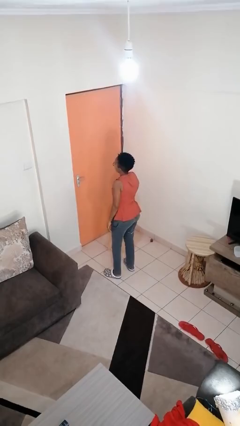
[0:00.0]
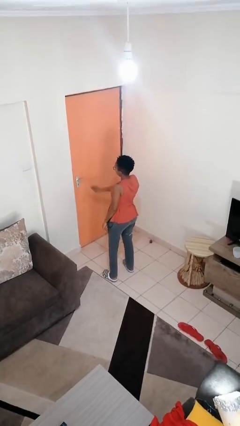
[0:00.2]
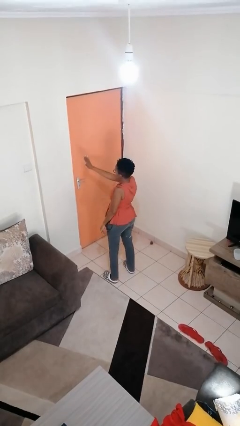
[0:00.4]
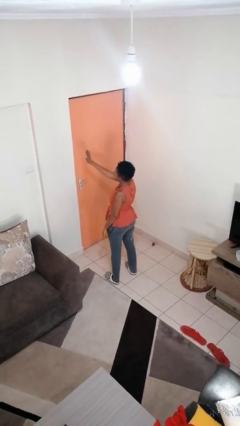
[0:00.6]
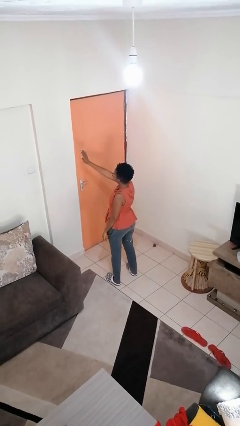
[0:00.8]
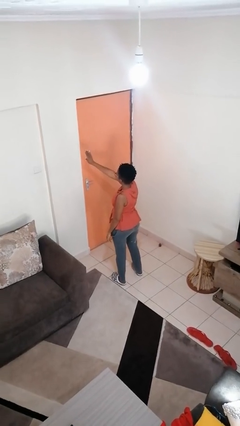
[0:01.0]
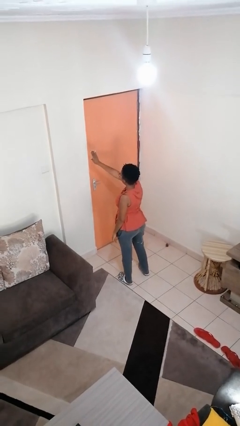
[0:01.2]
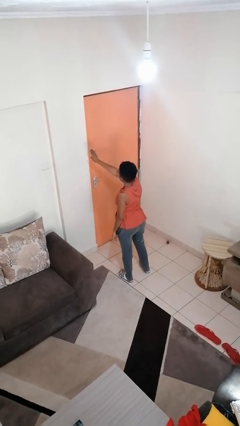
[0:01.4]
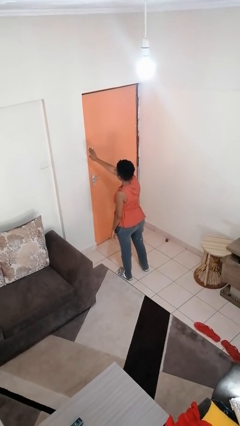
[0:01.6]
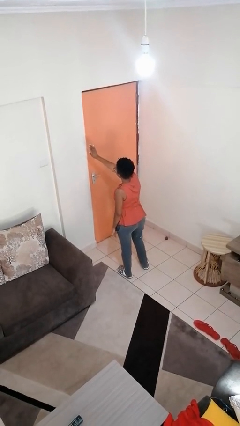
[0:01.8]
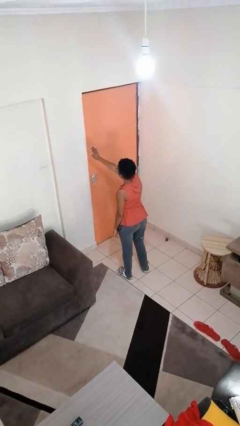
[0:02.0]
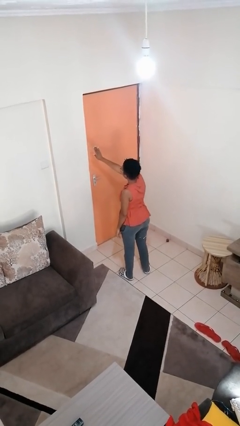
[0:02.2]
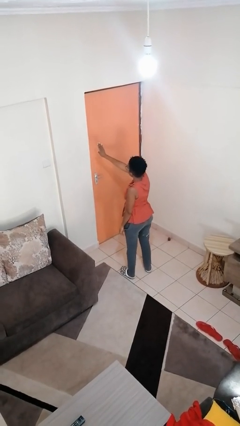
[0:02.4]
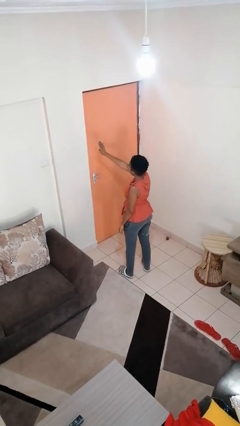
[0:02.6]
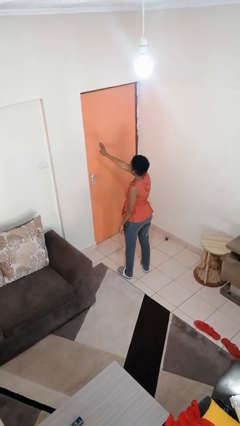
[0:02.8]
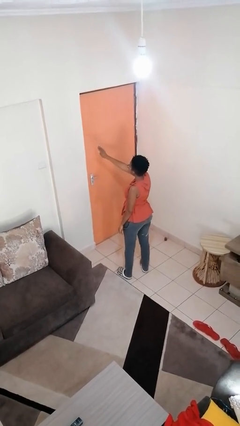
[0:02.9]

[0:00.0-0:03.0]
person gestures stop

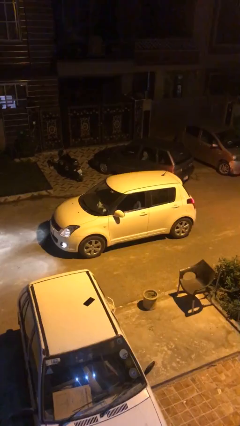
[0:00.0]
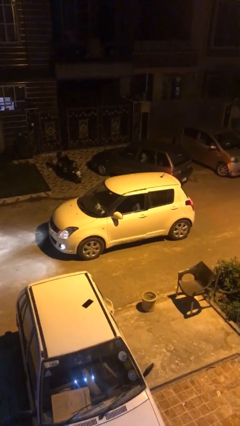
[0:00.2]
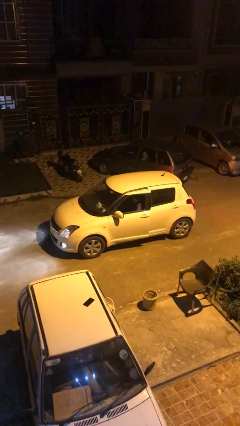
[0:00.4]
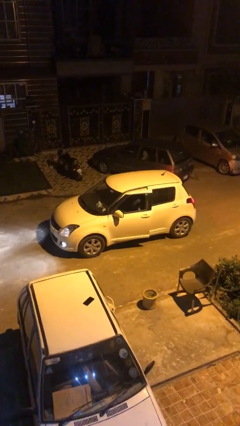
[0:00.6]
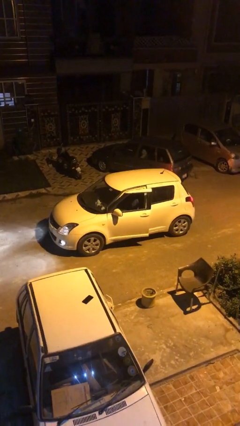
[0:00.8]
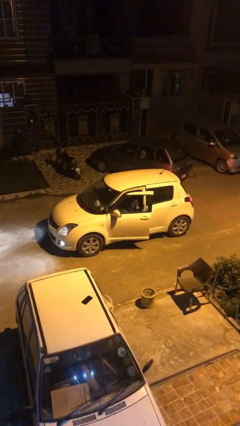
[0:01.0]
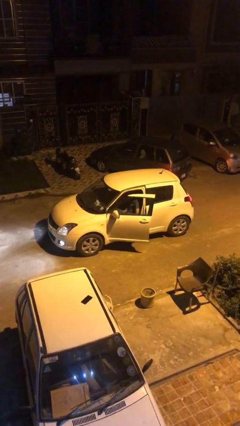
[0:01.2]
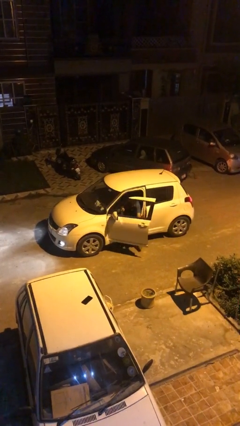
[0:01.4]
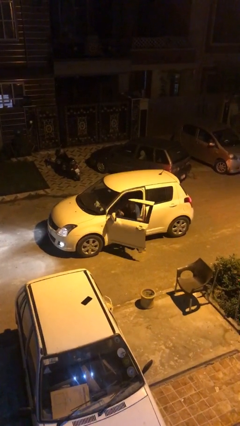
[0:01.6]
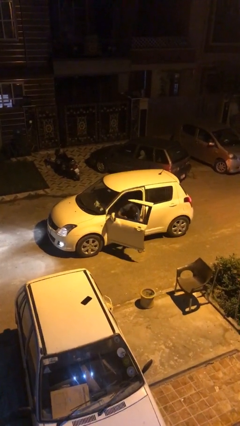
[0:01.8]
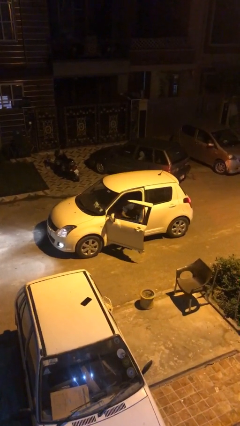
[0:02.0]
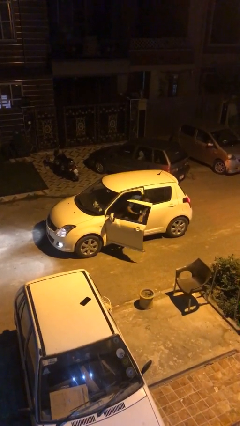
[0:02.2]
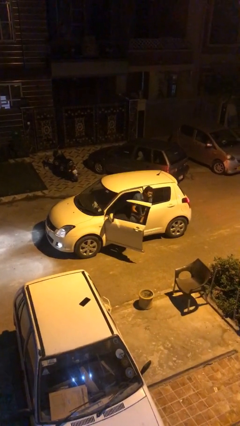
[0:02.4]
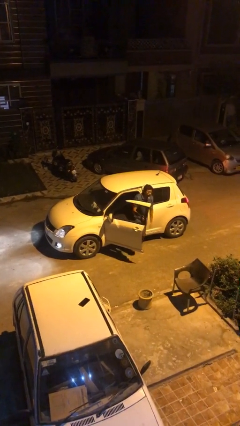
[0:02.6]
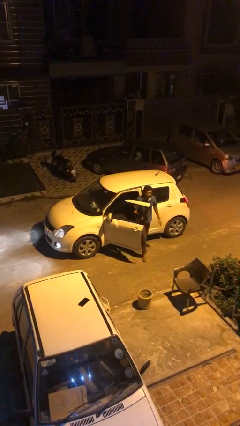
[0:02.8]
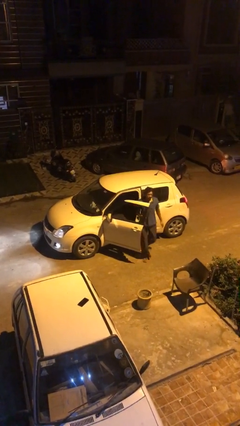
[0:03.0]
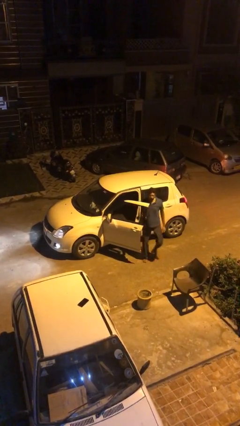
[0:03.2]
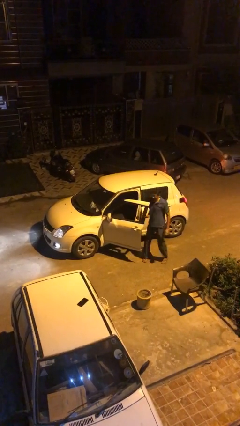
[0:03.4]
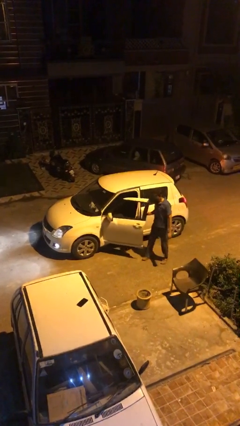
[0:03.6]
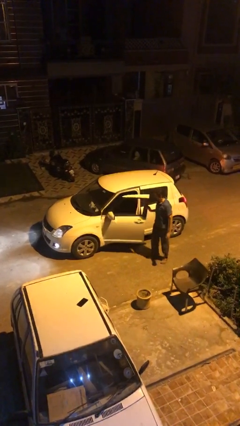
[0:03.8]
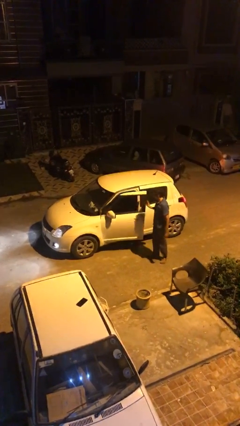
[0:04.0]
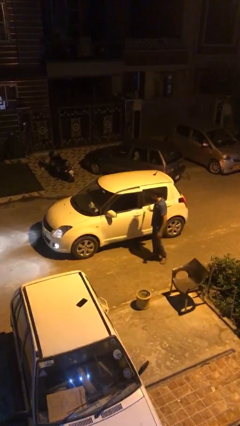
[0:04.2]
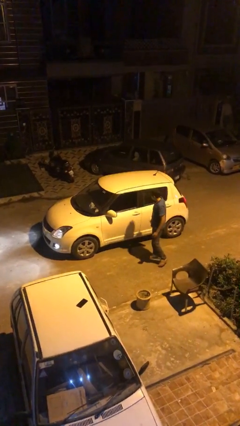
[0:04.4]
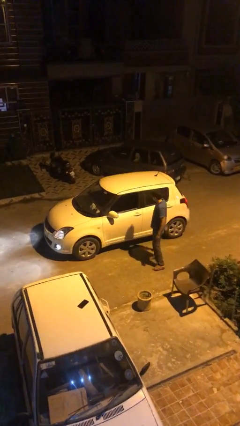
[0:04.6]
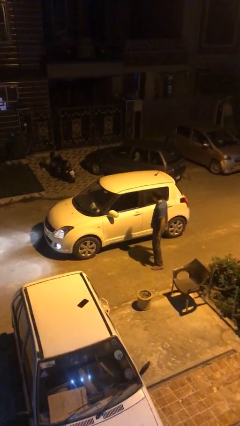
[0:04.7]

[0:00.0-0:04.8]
car drops off person

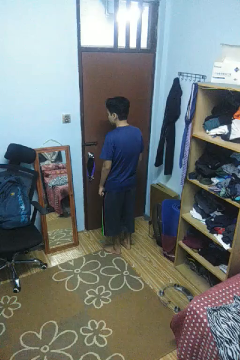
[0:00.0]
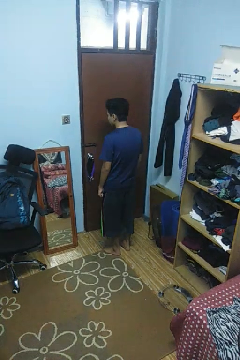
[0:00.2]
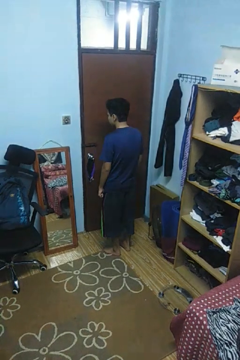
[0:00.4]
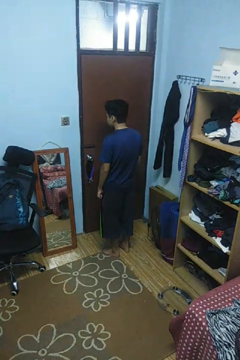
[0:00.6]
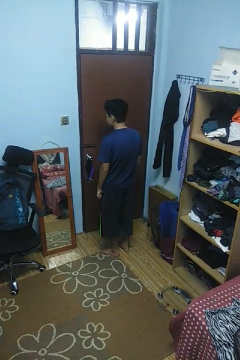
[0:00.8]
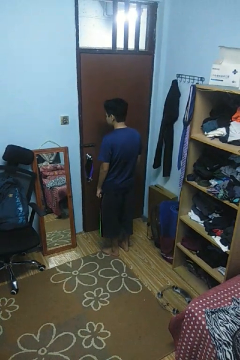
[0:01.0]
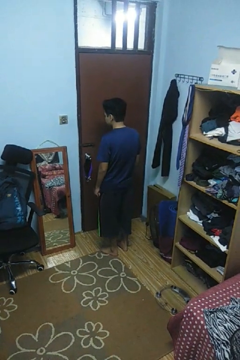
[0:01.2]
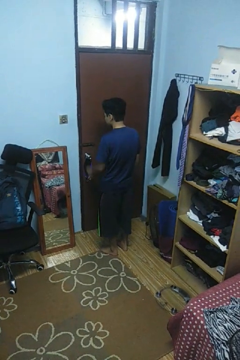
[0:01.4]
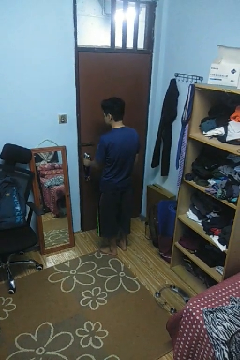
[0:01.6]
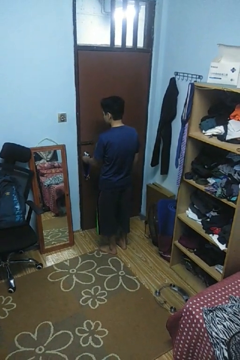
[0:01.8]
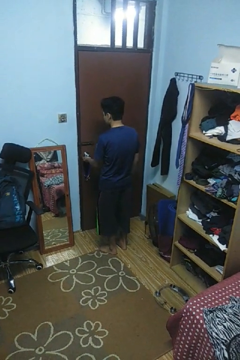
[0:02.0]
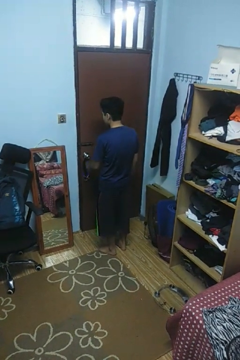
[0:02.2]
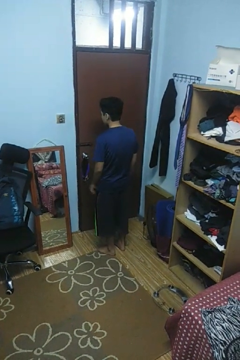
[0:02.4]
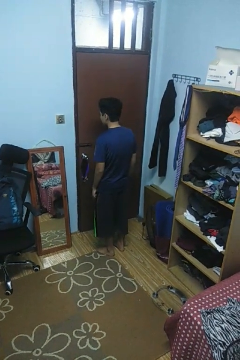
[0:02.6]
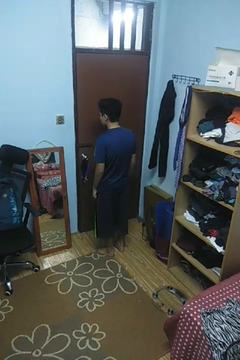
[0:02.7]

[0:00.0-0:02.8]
person unlocks door with keys

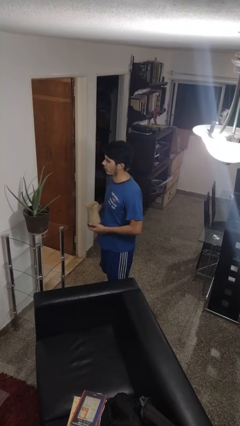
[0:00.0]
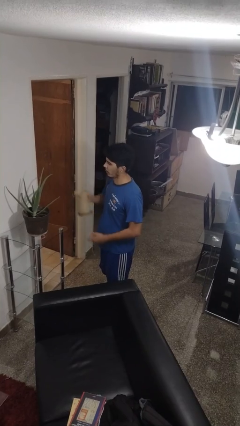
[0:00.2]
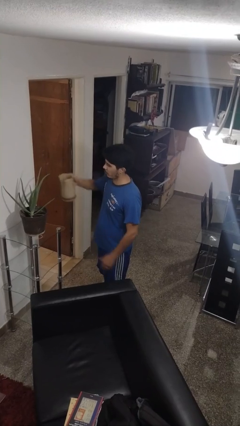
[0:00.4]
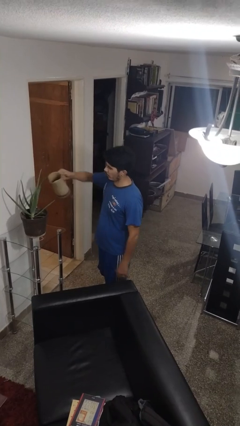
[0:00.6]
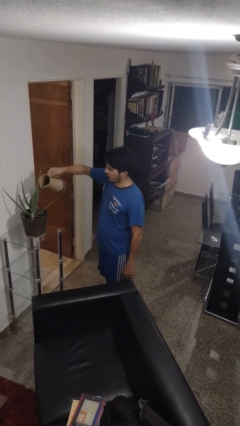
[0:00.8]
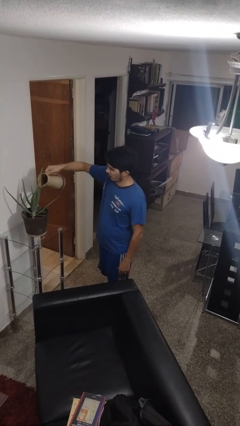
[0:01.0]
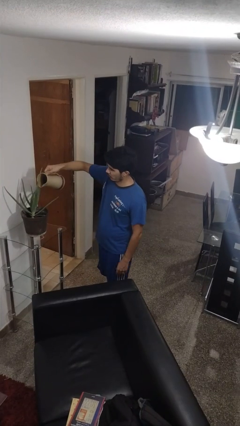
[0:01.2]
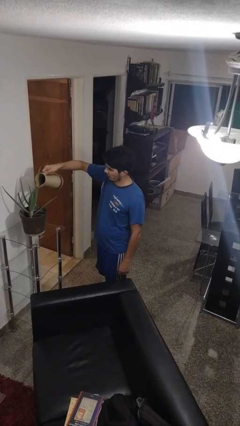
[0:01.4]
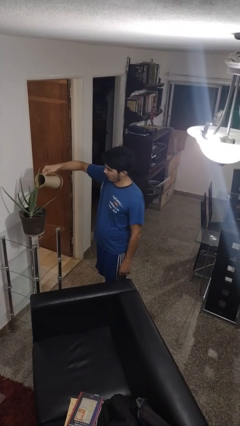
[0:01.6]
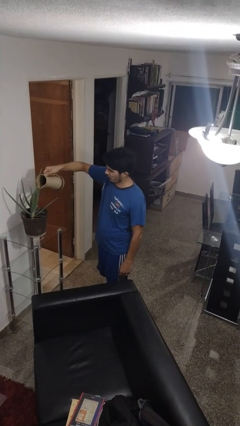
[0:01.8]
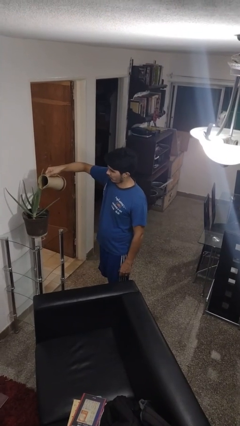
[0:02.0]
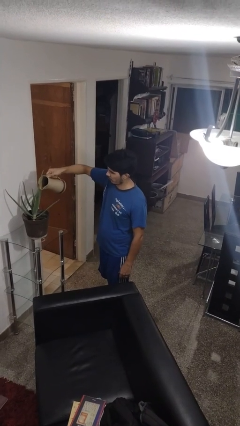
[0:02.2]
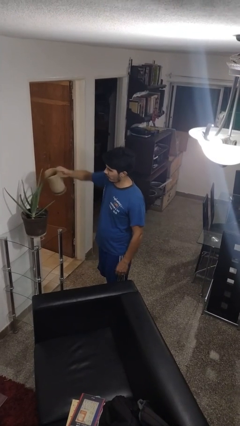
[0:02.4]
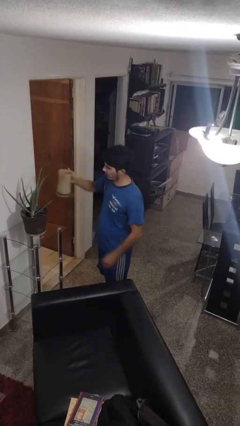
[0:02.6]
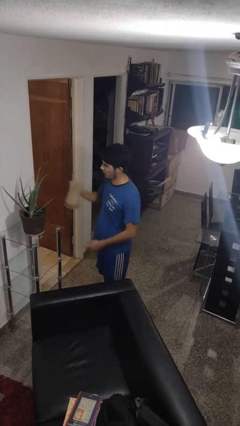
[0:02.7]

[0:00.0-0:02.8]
person waters houseplant

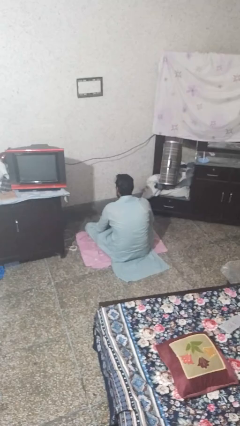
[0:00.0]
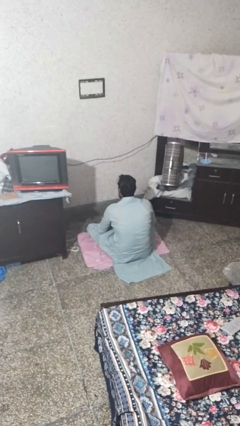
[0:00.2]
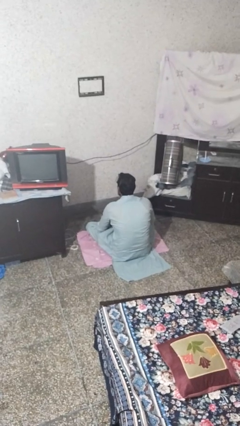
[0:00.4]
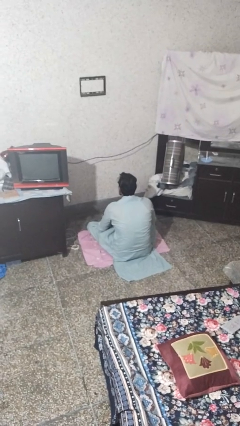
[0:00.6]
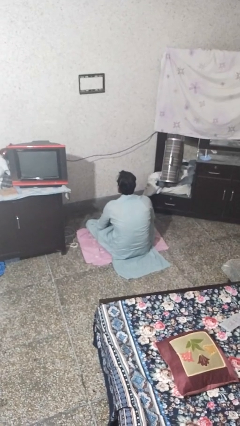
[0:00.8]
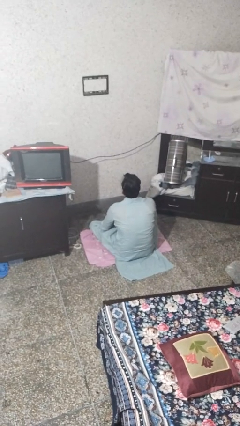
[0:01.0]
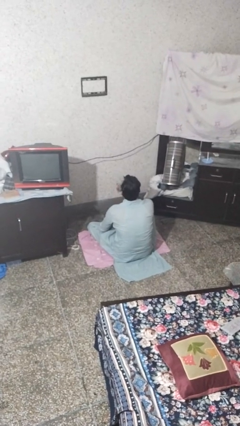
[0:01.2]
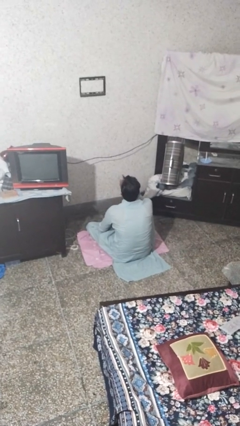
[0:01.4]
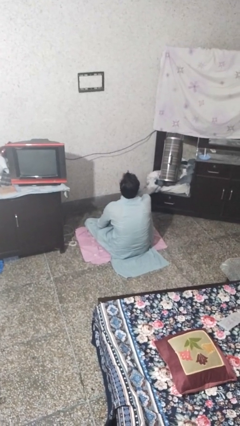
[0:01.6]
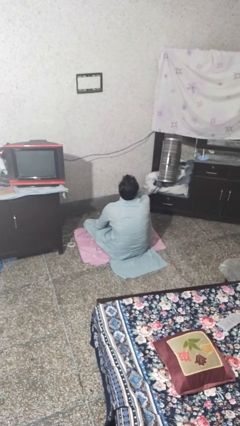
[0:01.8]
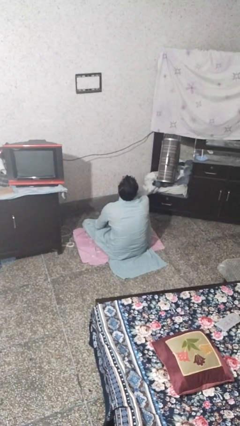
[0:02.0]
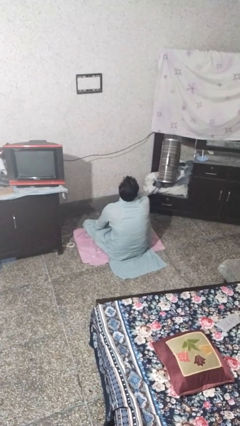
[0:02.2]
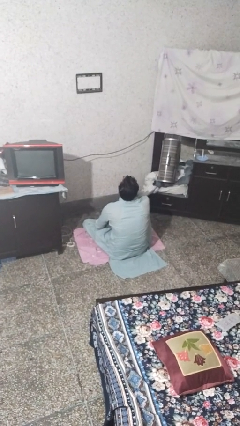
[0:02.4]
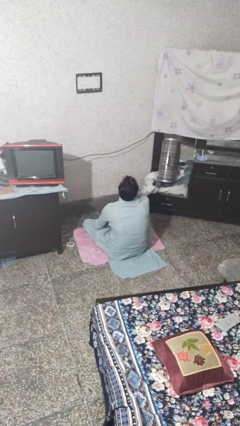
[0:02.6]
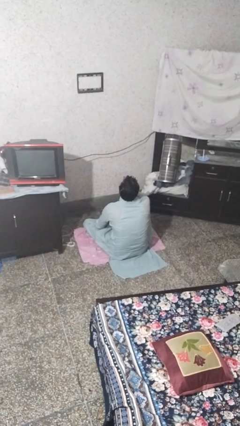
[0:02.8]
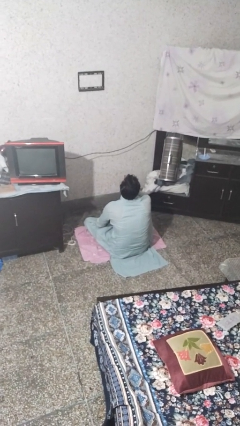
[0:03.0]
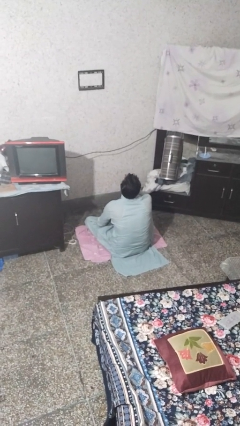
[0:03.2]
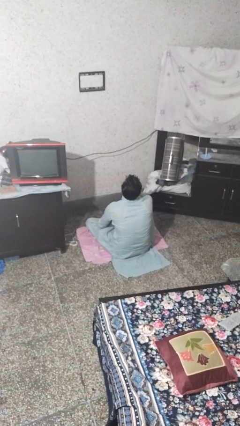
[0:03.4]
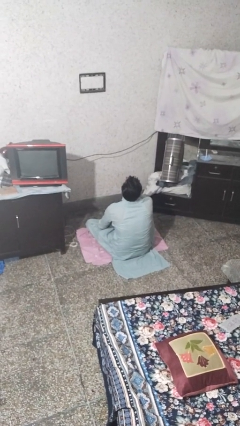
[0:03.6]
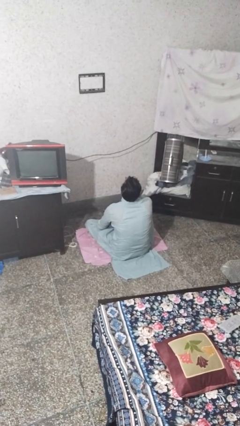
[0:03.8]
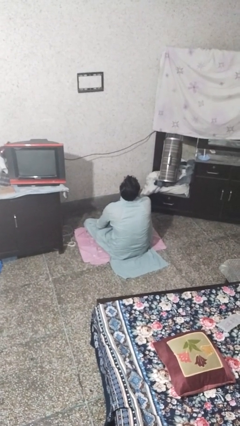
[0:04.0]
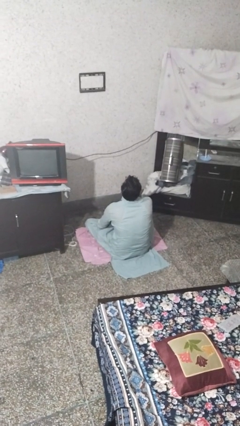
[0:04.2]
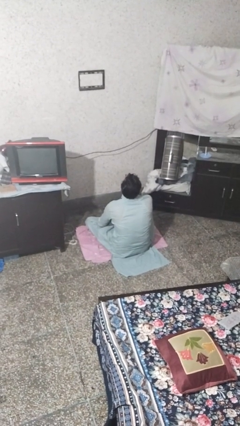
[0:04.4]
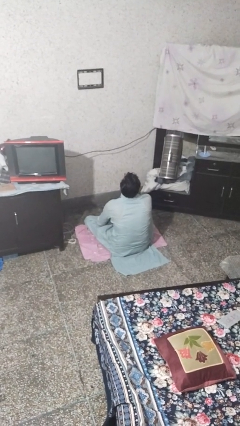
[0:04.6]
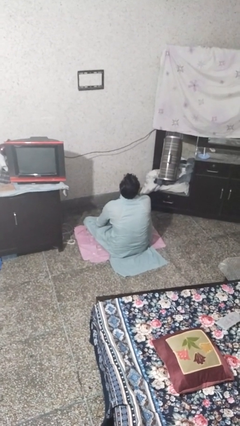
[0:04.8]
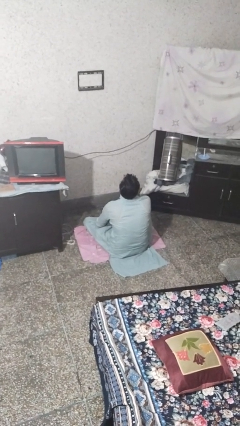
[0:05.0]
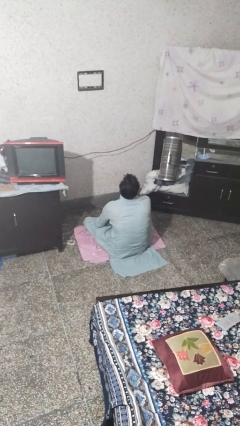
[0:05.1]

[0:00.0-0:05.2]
person licks fingers
